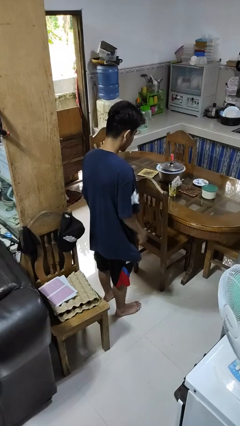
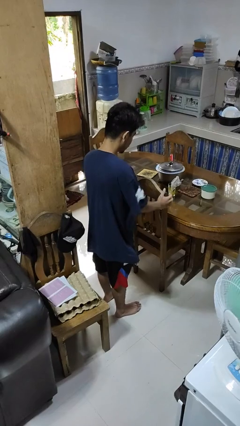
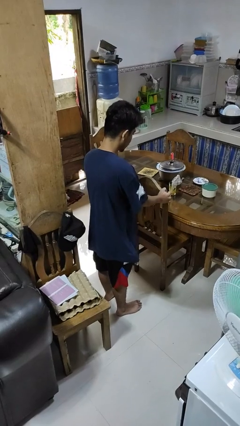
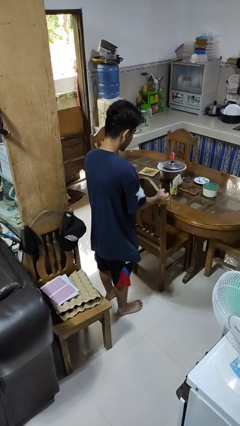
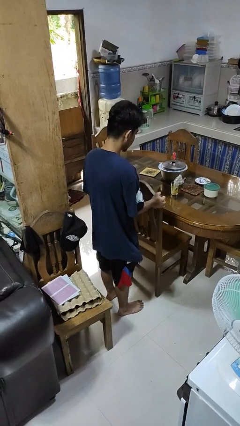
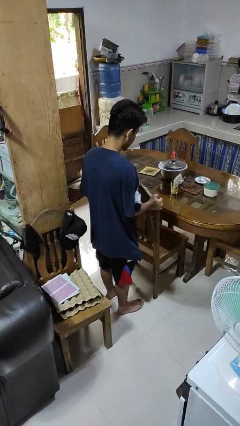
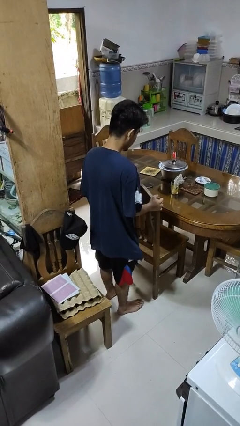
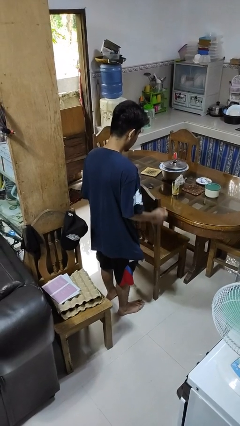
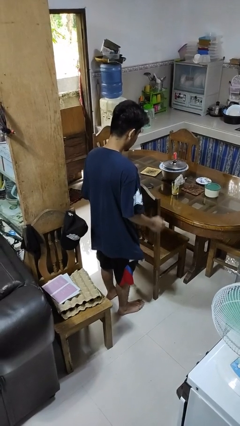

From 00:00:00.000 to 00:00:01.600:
person pulls out chair

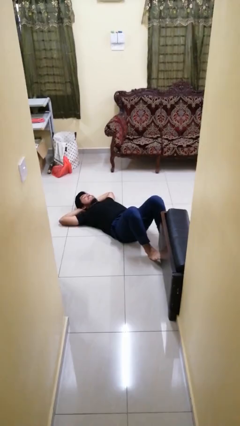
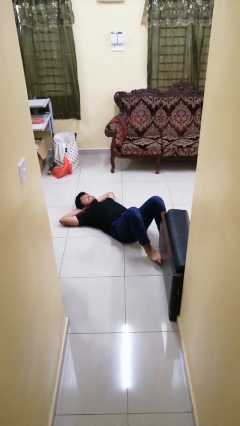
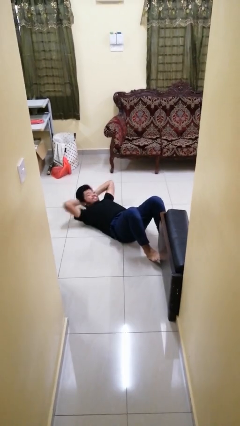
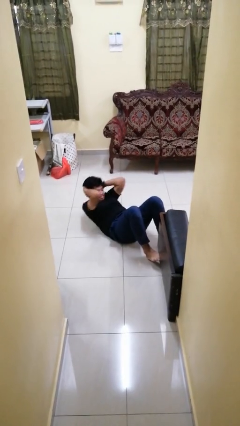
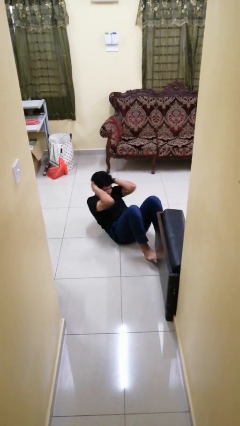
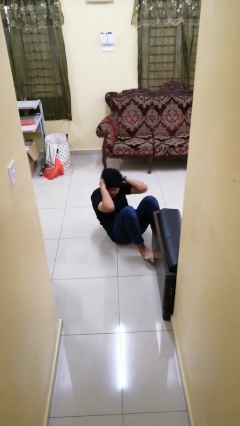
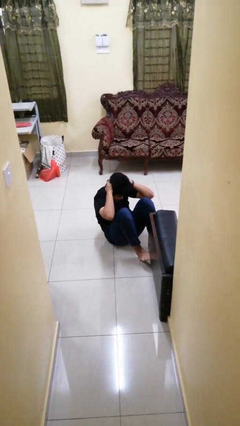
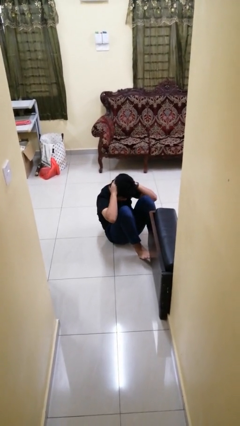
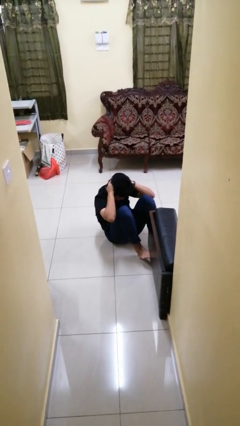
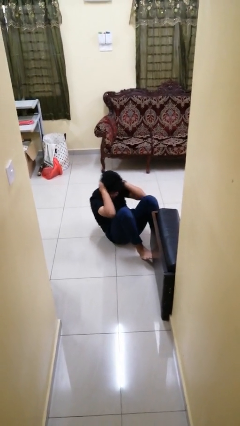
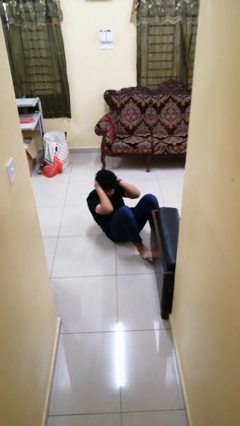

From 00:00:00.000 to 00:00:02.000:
person exercises with situp

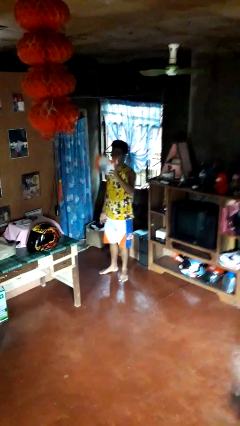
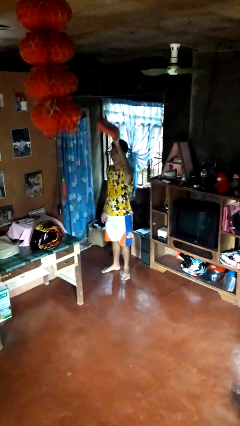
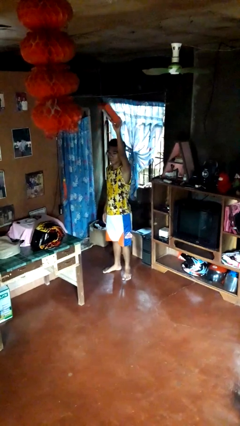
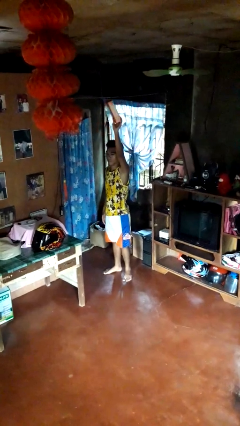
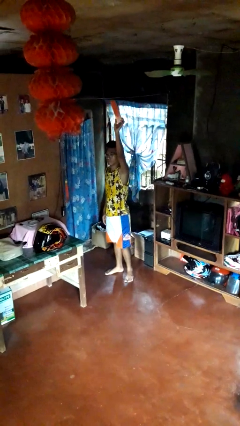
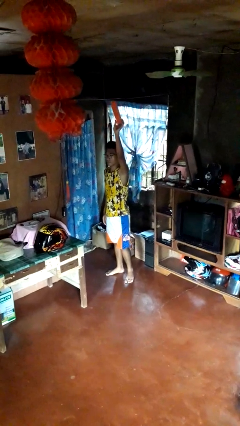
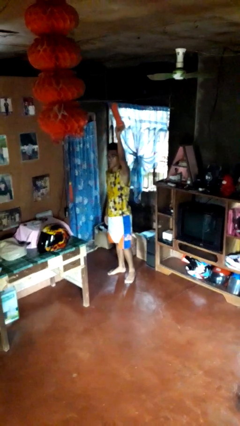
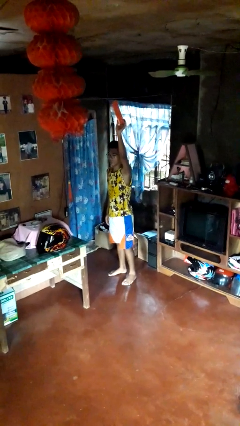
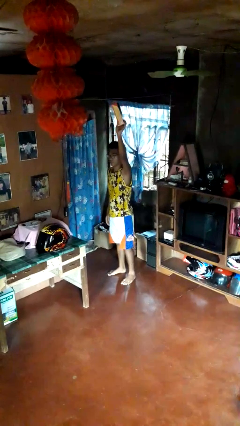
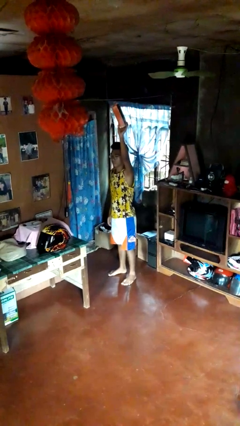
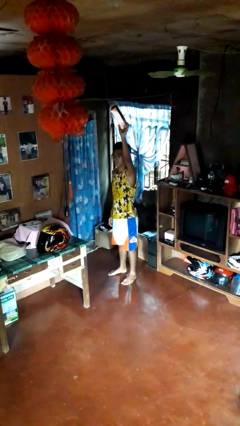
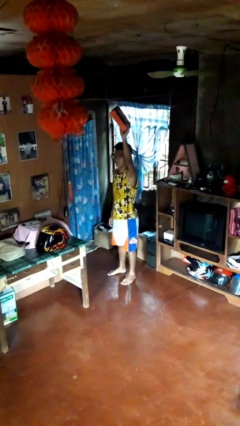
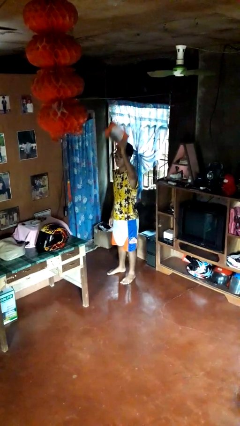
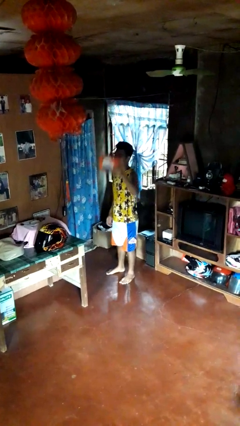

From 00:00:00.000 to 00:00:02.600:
person holds object above head

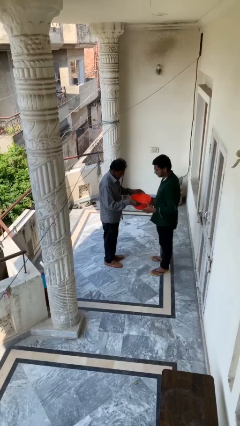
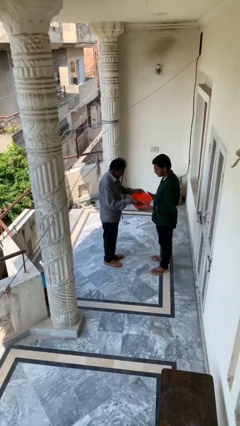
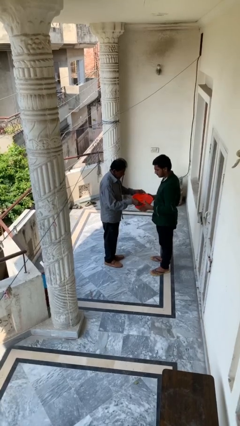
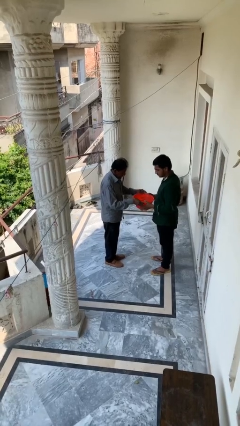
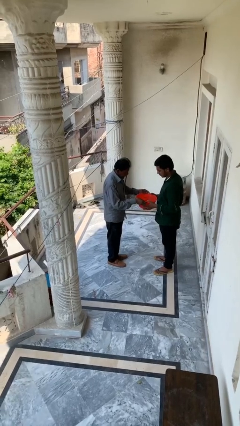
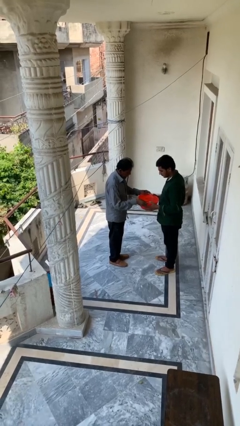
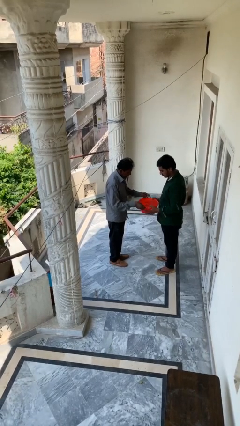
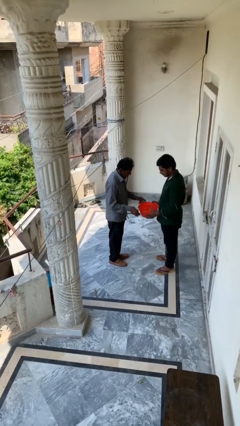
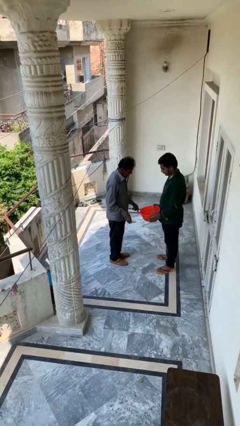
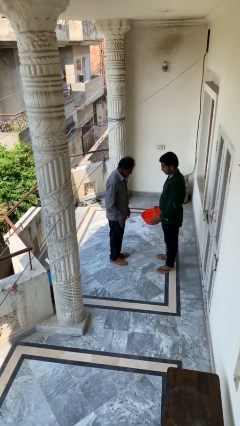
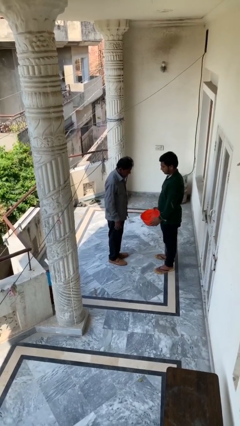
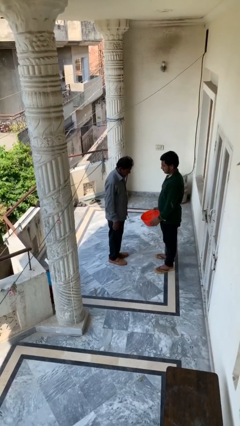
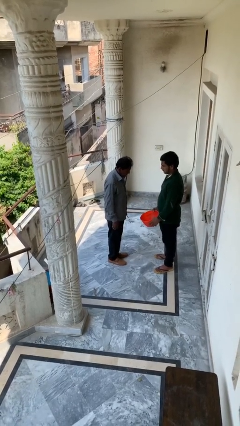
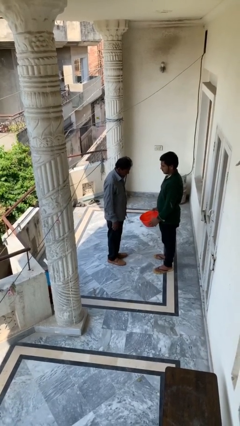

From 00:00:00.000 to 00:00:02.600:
person transfers object to person

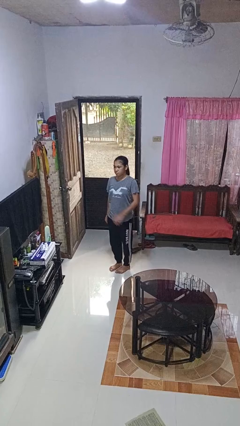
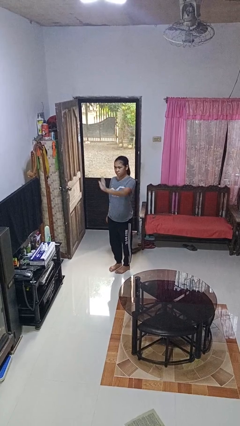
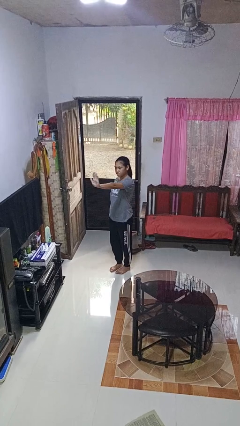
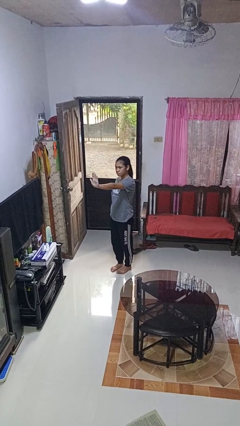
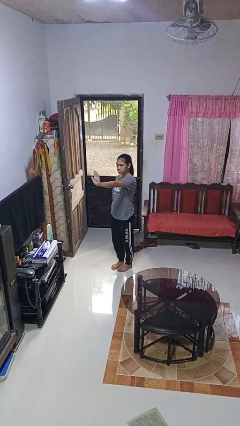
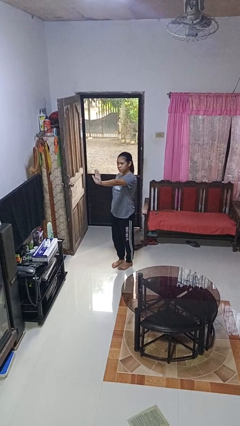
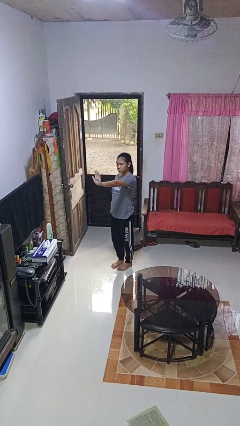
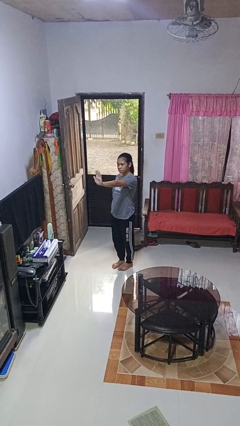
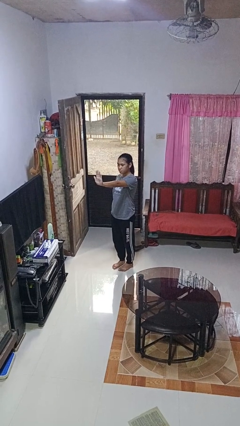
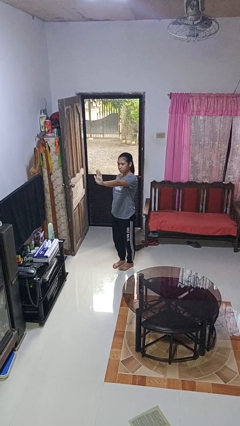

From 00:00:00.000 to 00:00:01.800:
person gestures stop

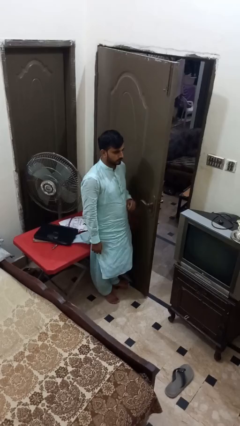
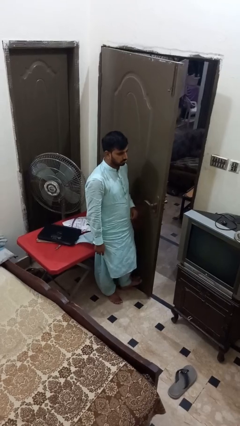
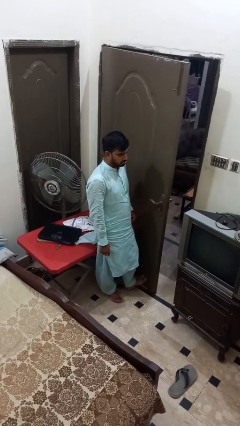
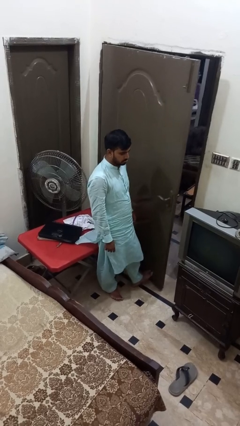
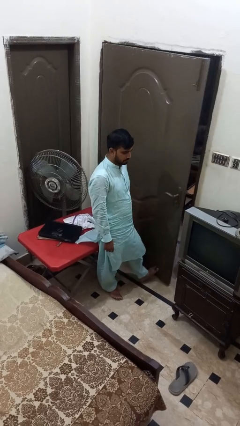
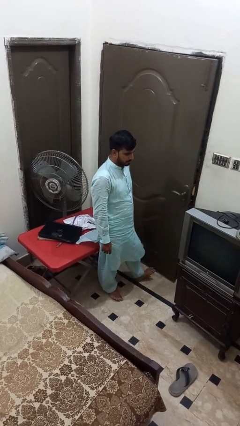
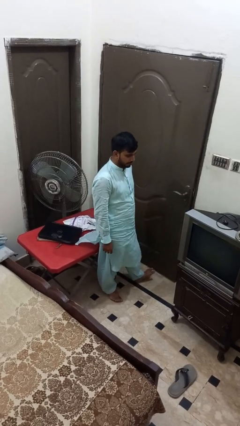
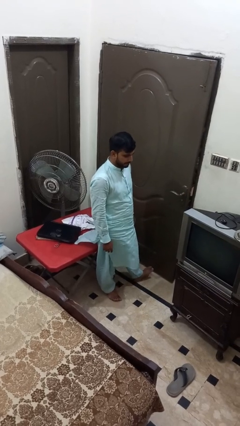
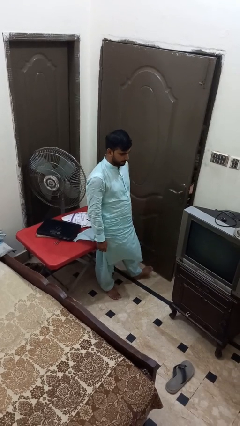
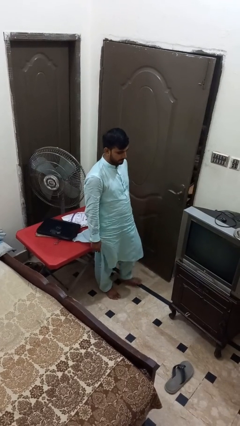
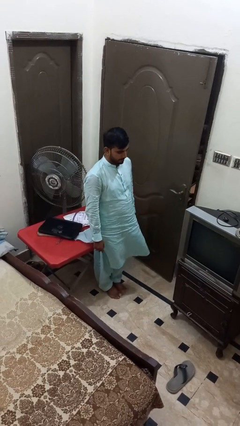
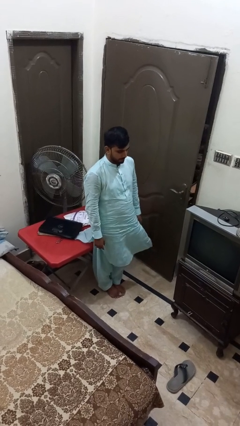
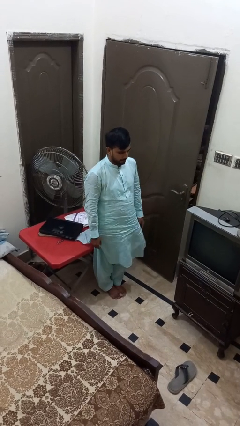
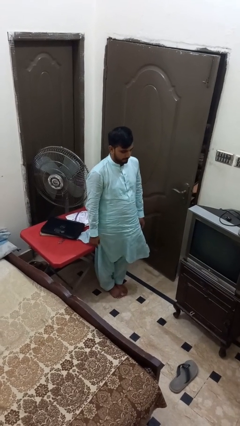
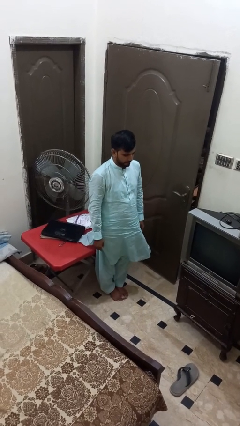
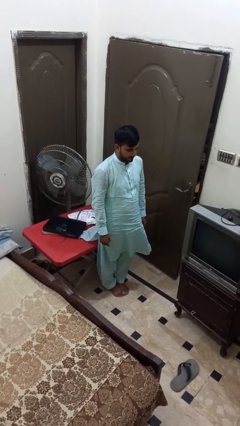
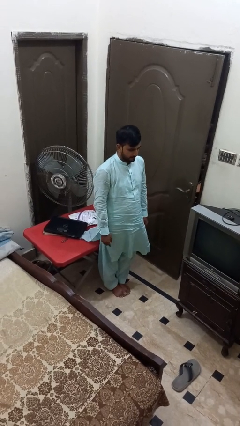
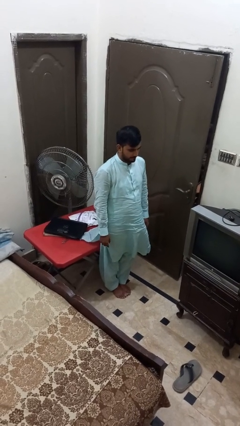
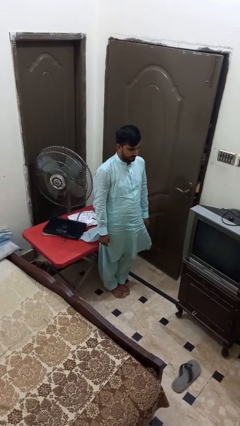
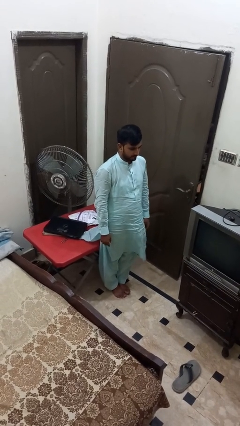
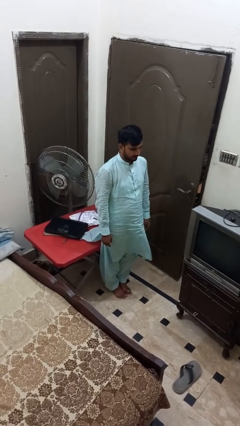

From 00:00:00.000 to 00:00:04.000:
person closes door with foot

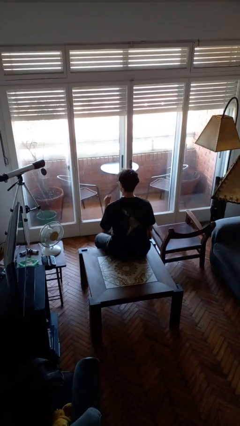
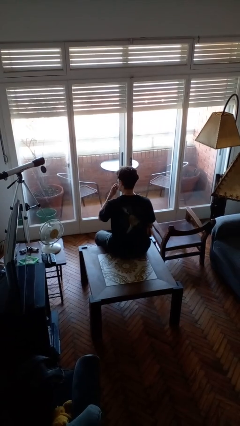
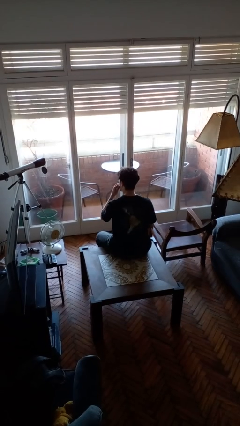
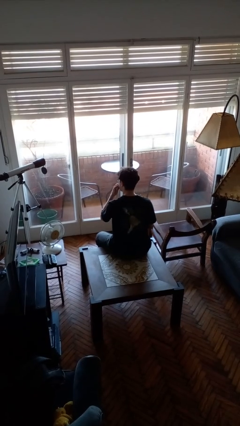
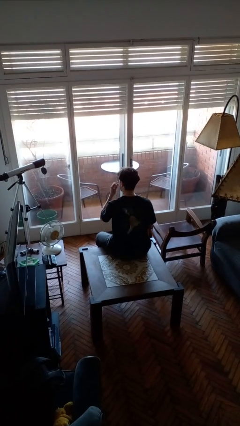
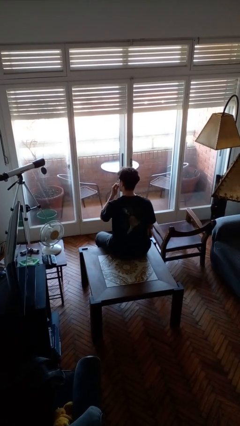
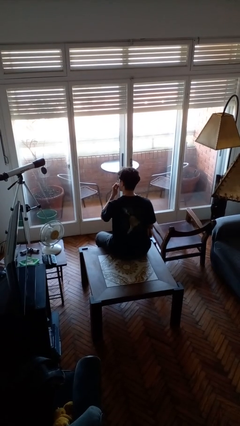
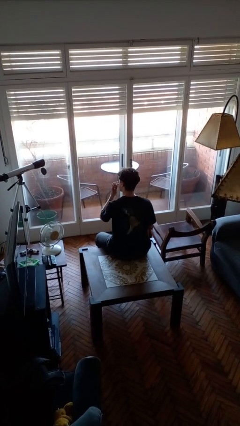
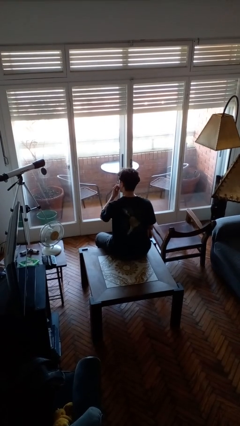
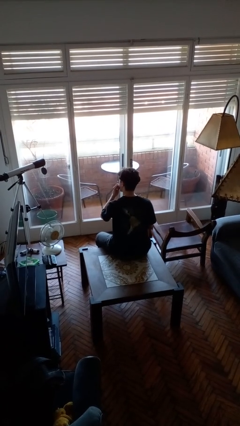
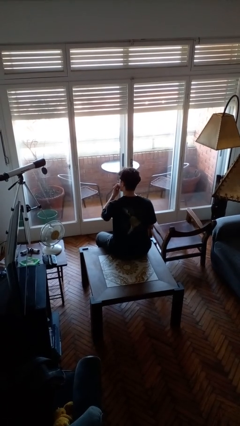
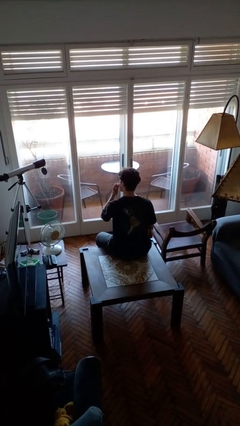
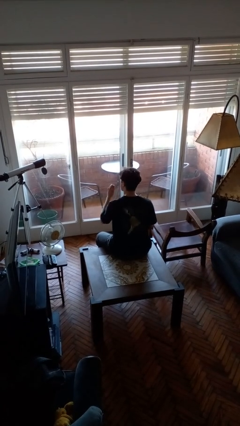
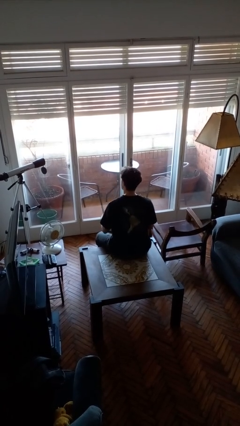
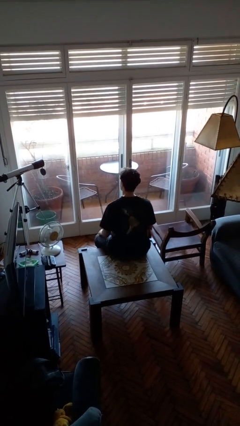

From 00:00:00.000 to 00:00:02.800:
person licks fingers
